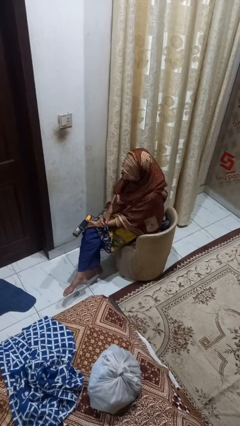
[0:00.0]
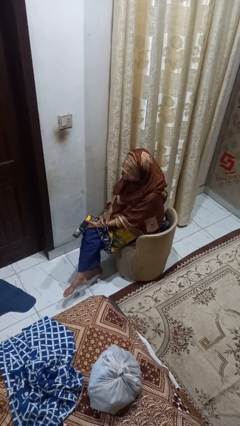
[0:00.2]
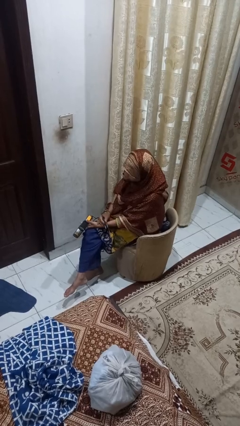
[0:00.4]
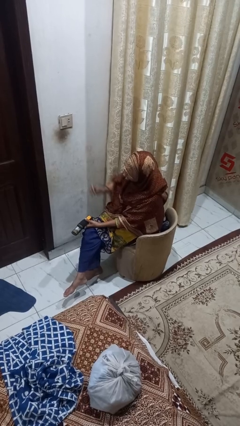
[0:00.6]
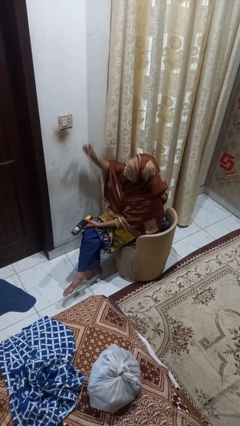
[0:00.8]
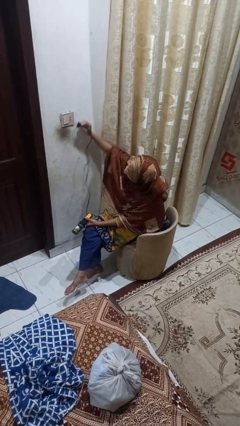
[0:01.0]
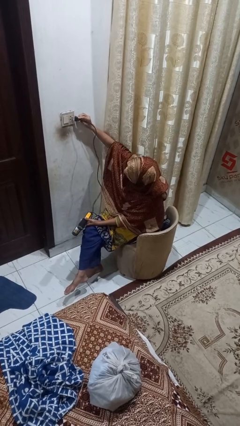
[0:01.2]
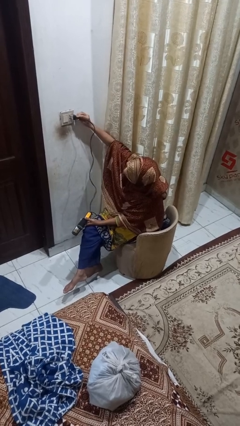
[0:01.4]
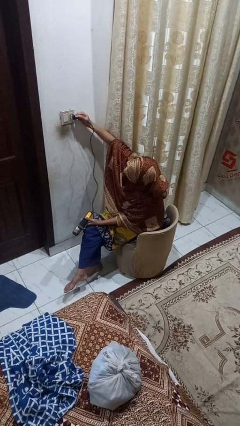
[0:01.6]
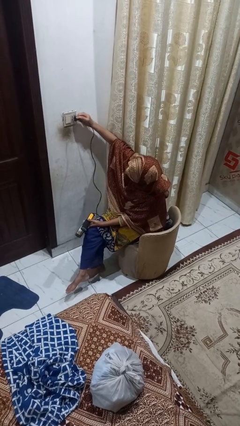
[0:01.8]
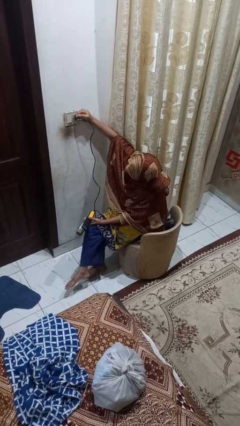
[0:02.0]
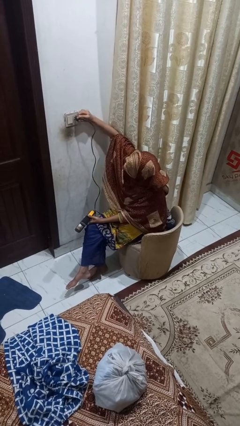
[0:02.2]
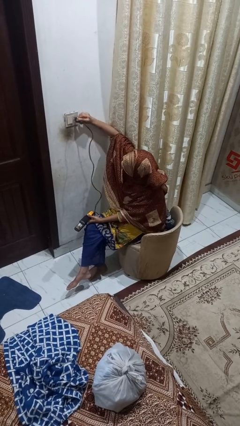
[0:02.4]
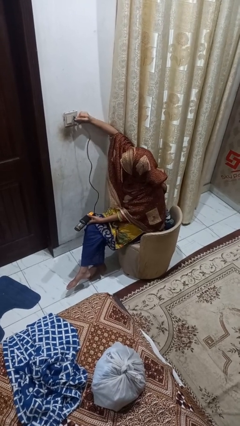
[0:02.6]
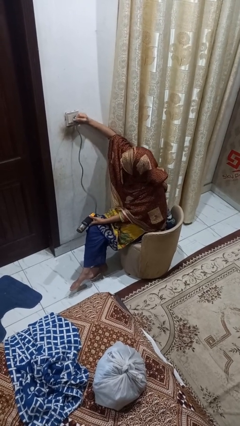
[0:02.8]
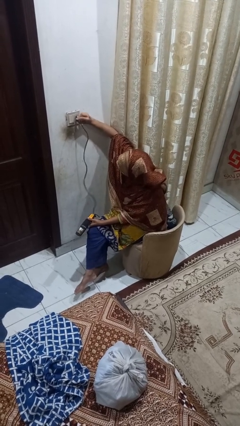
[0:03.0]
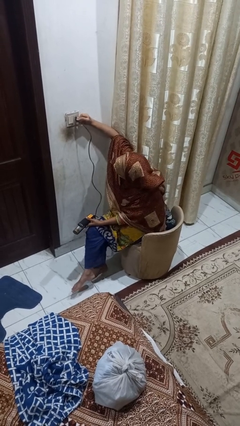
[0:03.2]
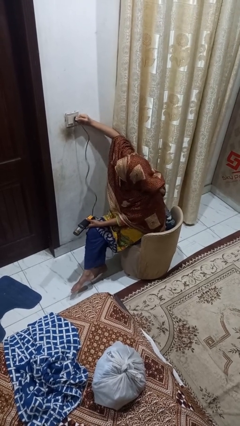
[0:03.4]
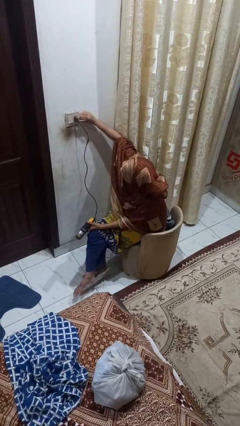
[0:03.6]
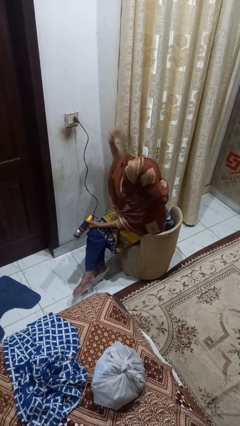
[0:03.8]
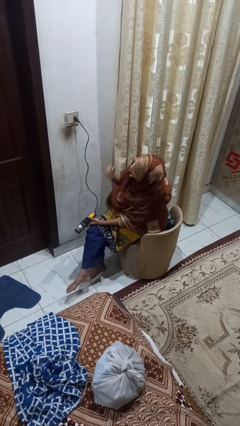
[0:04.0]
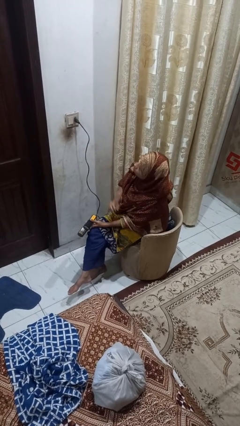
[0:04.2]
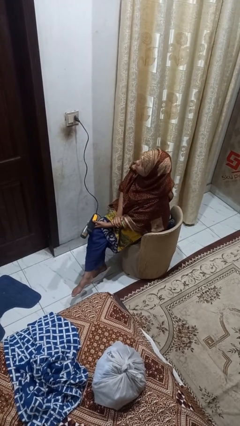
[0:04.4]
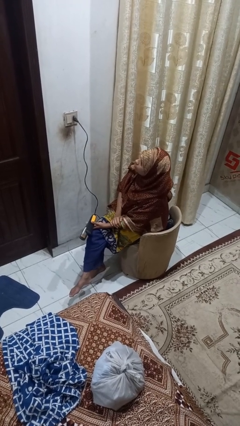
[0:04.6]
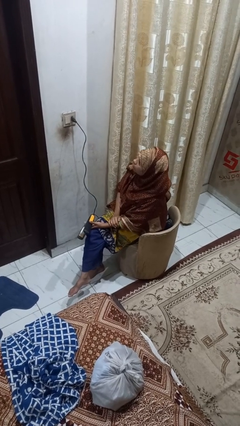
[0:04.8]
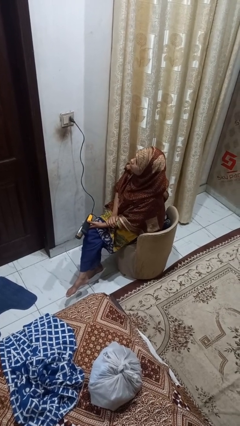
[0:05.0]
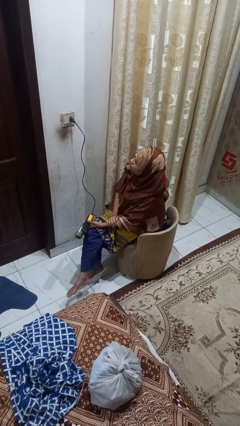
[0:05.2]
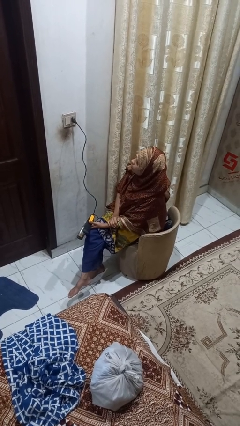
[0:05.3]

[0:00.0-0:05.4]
person plugs into electrical socket

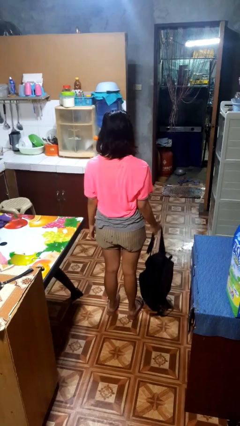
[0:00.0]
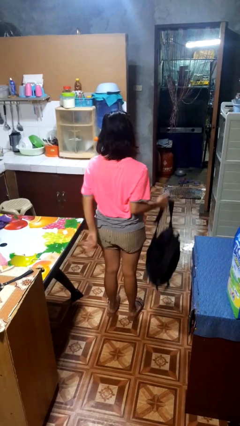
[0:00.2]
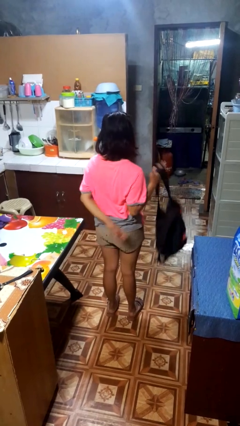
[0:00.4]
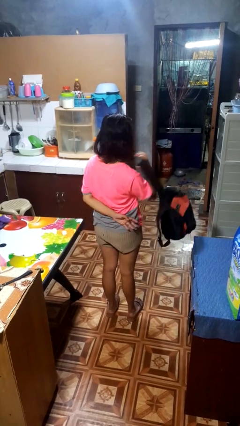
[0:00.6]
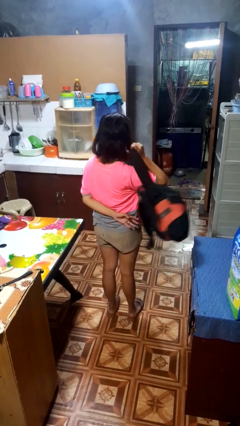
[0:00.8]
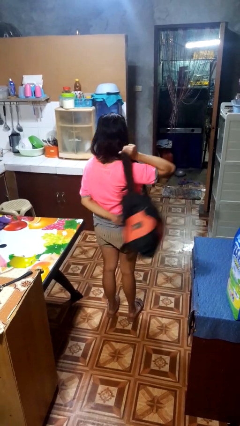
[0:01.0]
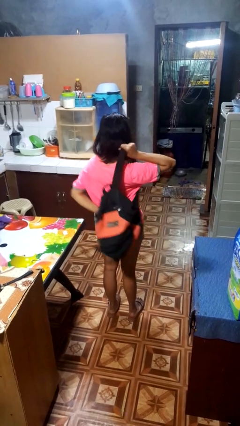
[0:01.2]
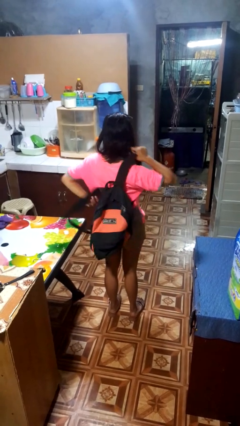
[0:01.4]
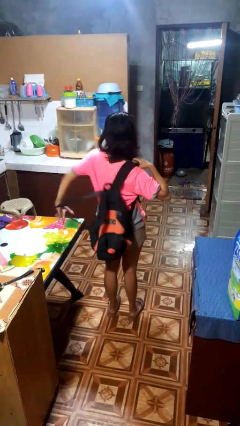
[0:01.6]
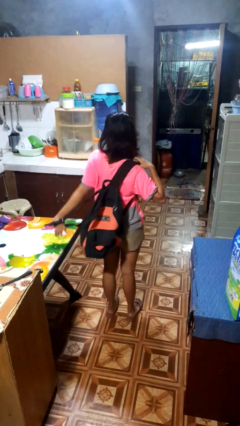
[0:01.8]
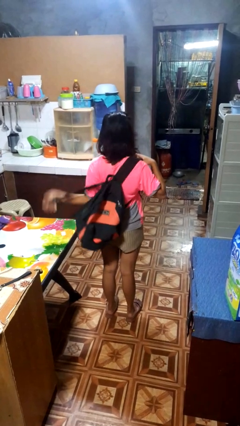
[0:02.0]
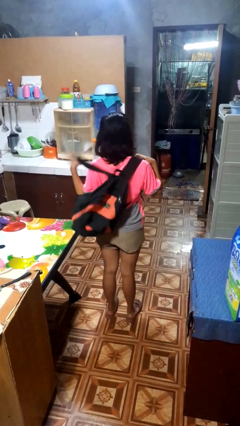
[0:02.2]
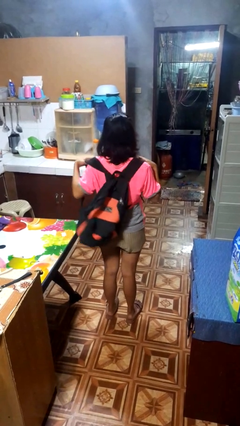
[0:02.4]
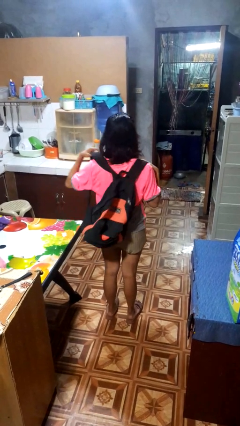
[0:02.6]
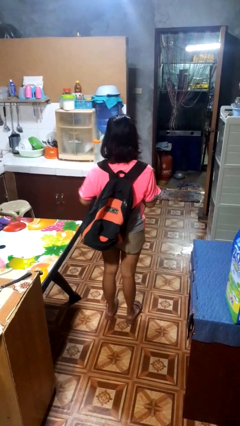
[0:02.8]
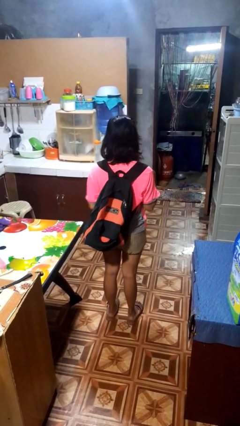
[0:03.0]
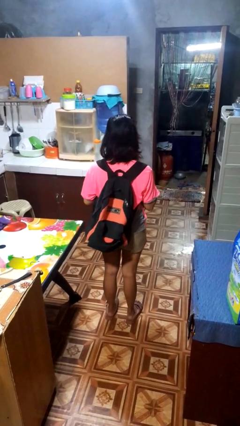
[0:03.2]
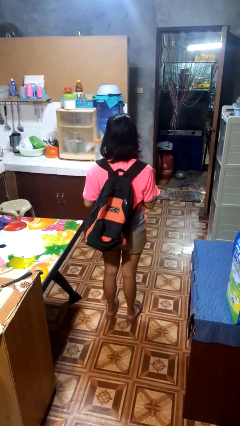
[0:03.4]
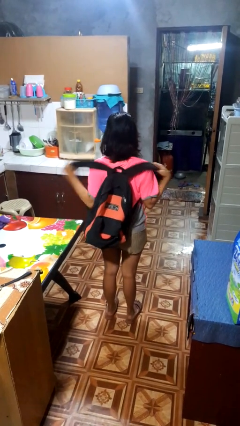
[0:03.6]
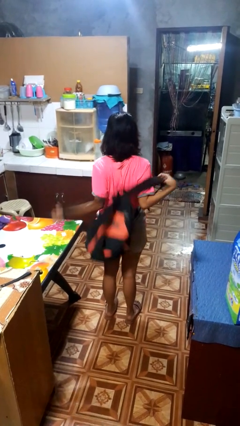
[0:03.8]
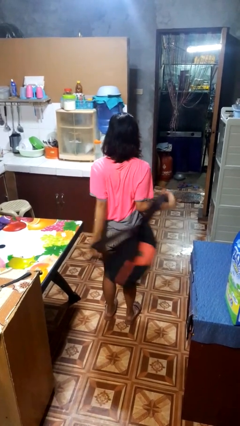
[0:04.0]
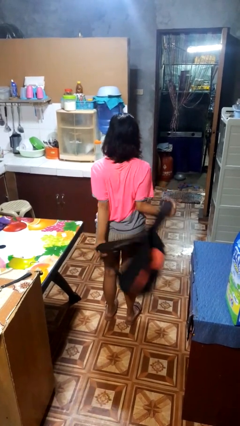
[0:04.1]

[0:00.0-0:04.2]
person puts on backpack

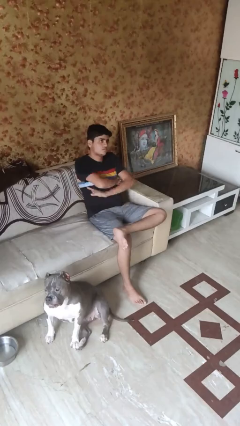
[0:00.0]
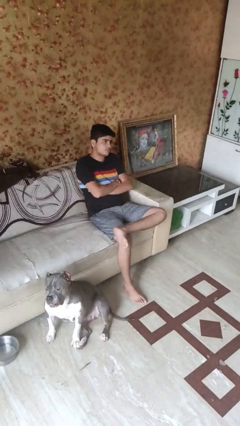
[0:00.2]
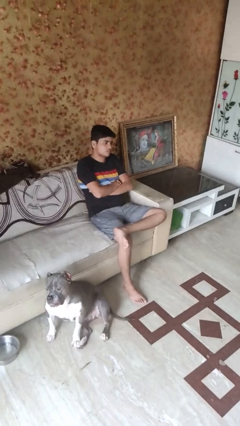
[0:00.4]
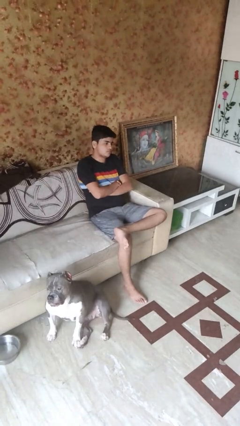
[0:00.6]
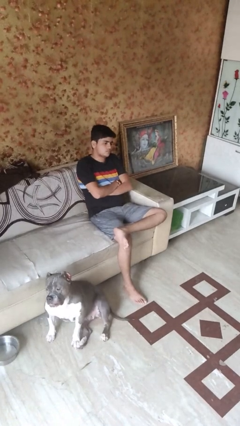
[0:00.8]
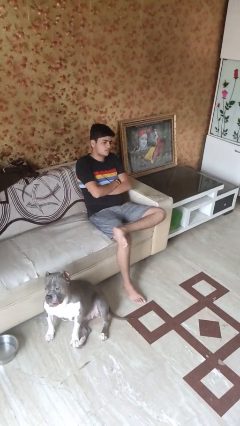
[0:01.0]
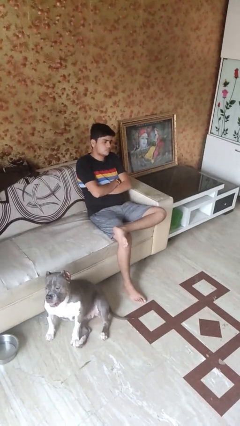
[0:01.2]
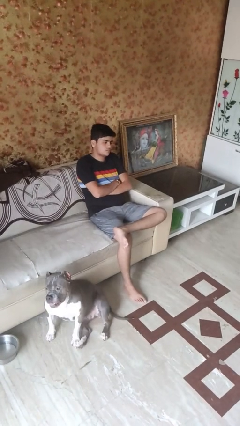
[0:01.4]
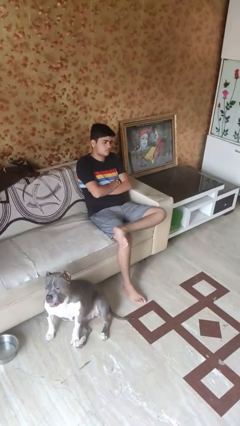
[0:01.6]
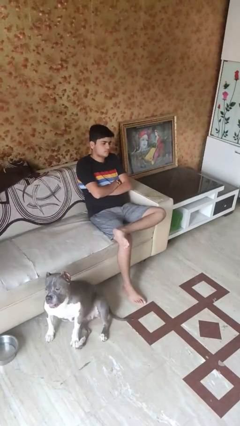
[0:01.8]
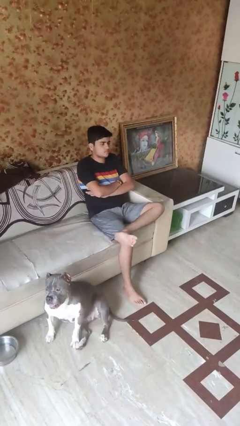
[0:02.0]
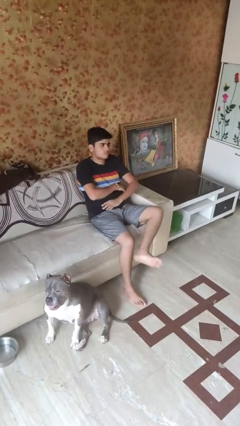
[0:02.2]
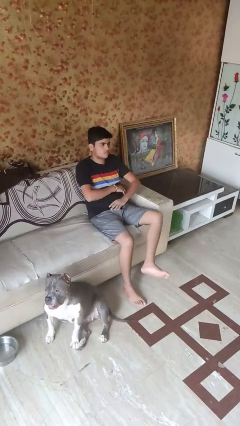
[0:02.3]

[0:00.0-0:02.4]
person crosses arms

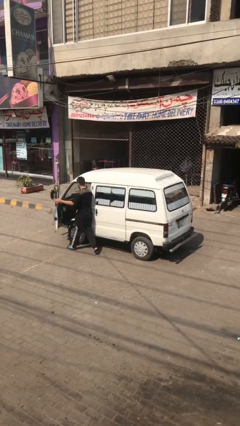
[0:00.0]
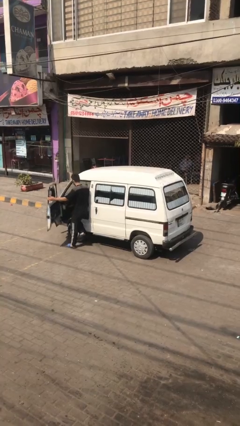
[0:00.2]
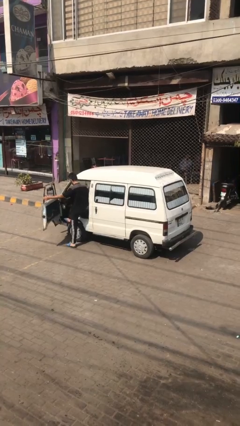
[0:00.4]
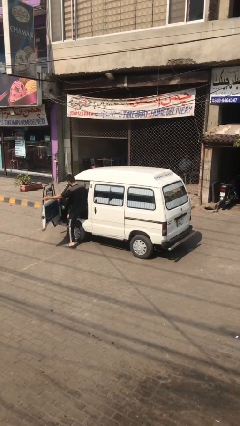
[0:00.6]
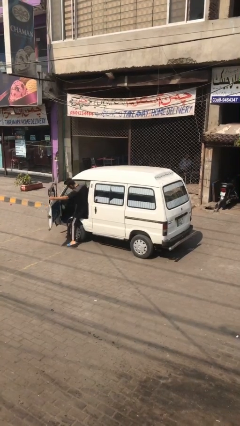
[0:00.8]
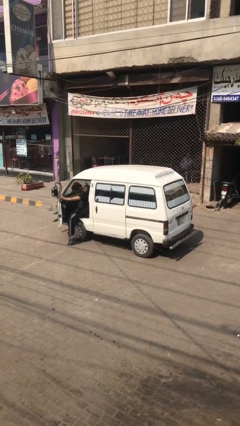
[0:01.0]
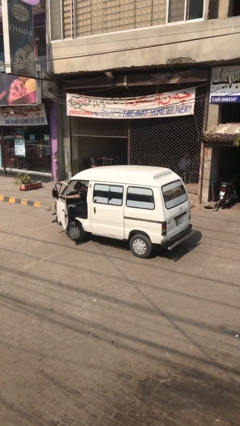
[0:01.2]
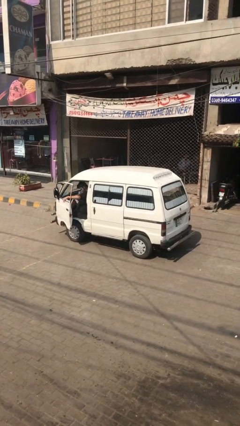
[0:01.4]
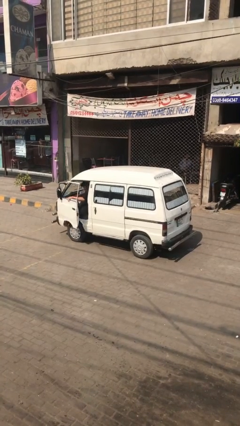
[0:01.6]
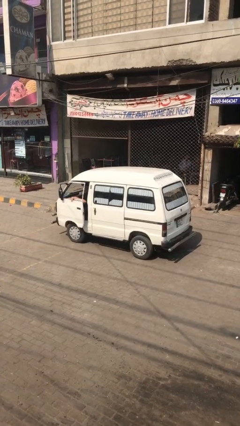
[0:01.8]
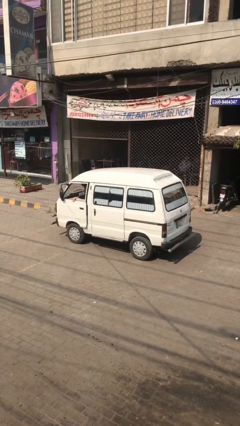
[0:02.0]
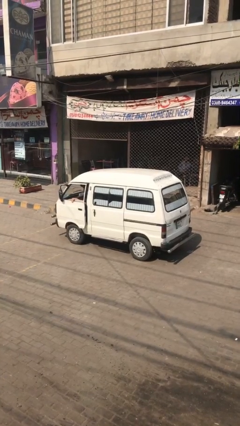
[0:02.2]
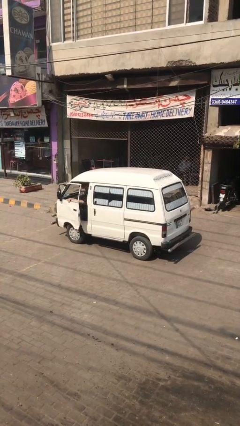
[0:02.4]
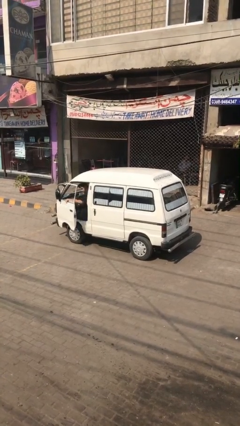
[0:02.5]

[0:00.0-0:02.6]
car picks up person

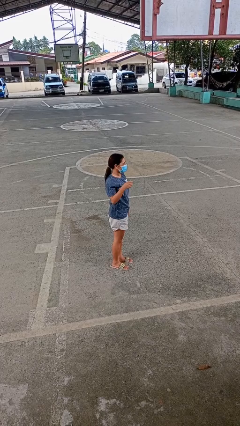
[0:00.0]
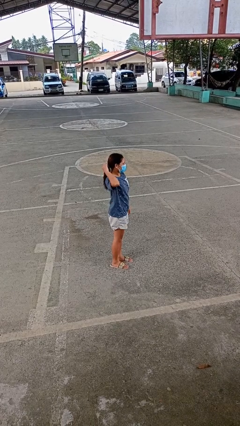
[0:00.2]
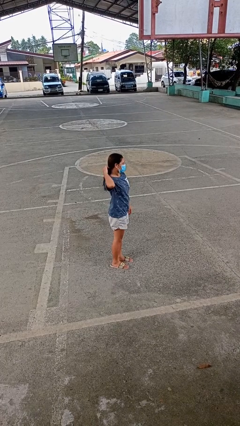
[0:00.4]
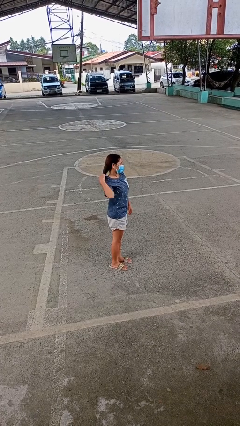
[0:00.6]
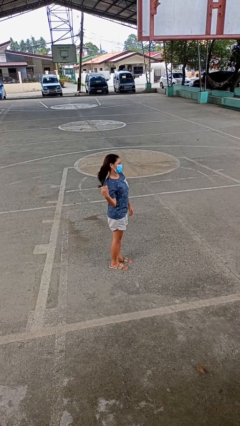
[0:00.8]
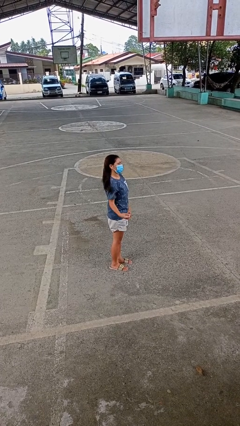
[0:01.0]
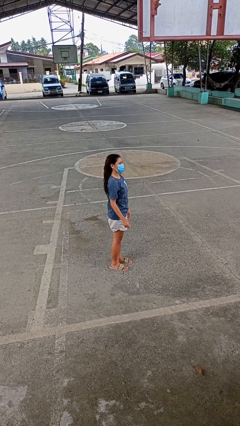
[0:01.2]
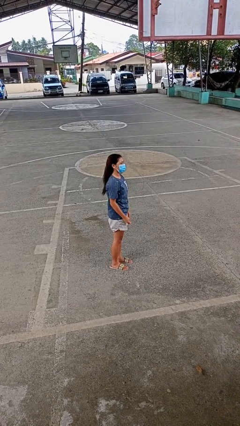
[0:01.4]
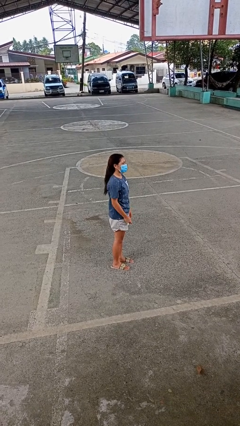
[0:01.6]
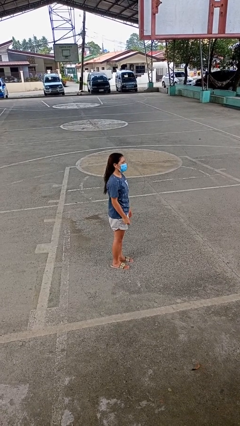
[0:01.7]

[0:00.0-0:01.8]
person takes off hairtie

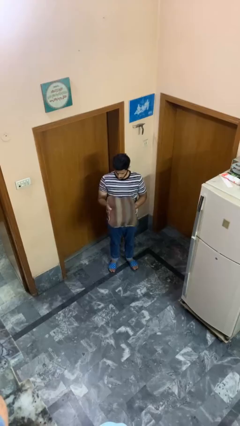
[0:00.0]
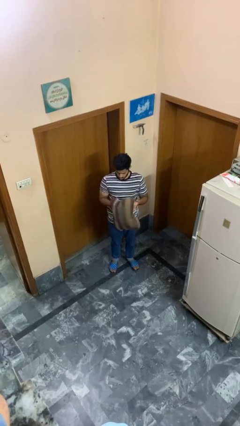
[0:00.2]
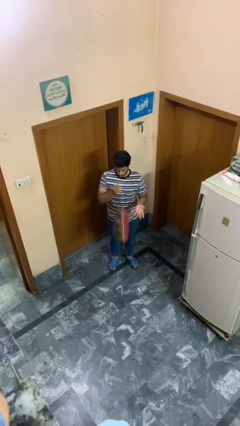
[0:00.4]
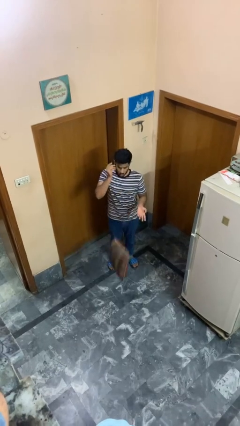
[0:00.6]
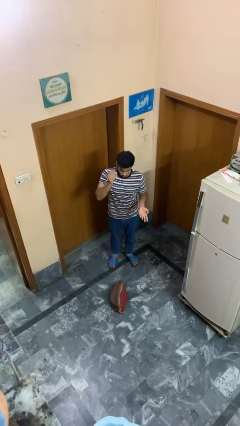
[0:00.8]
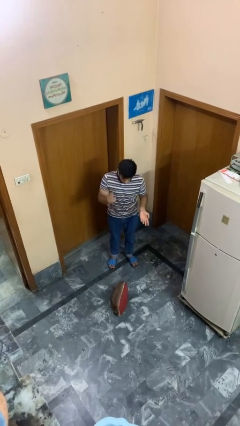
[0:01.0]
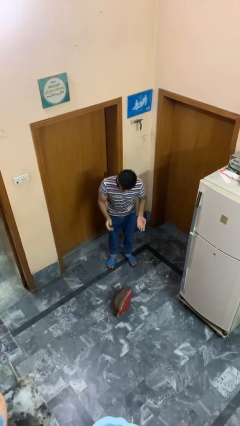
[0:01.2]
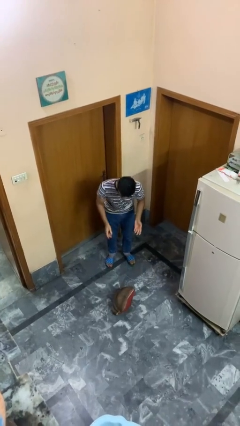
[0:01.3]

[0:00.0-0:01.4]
person drops object
